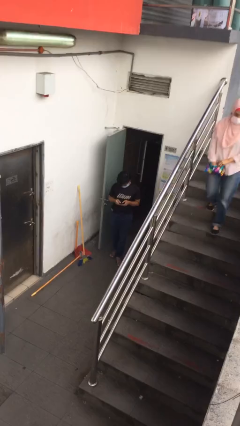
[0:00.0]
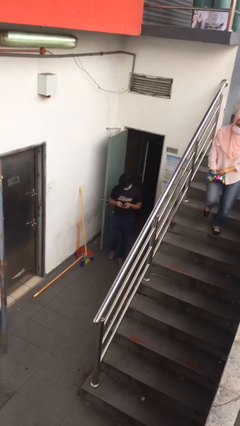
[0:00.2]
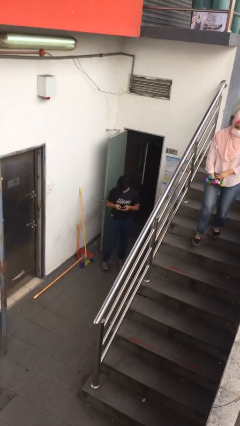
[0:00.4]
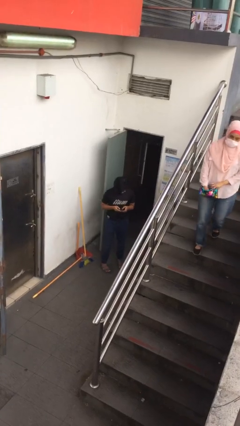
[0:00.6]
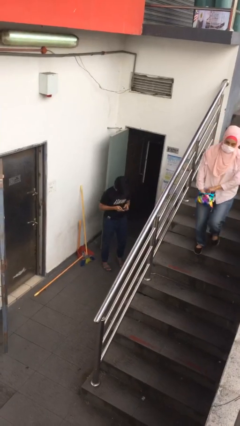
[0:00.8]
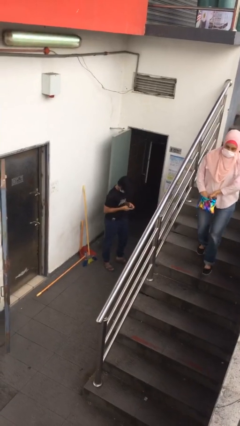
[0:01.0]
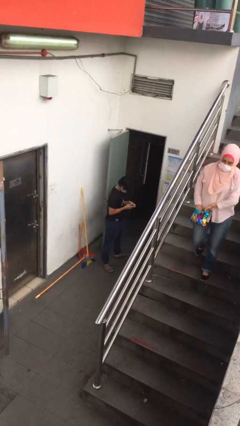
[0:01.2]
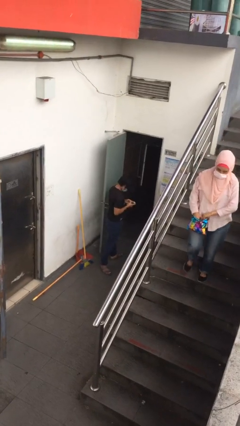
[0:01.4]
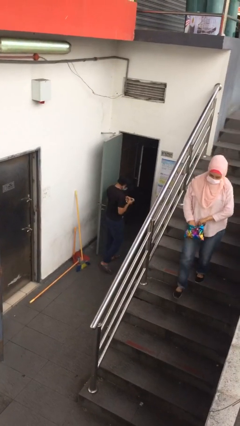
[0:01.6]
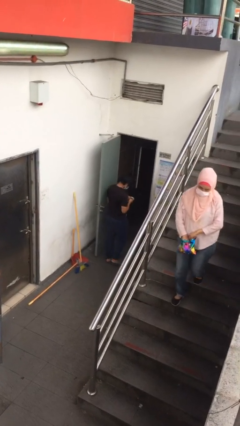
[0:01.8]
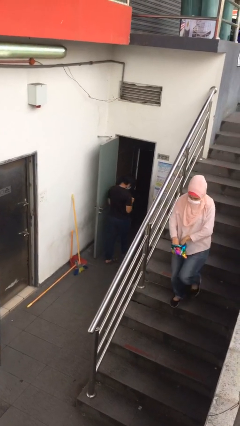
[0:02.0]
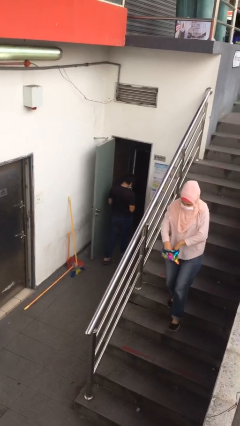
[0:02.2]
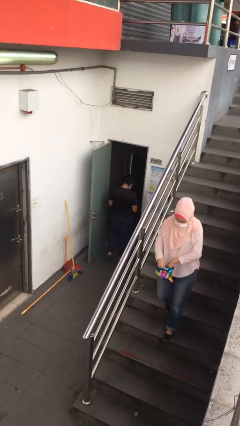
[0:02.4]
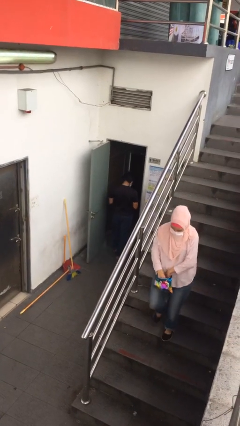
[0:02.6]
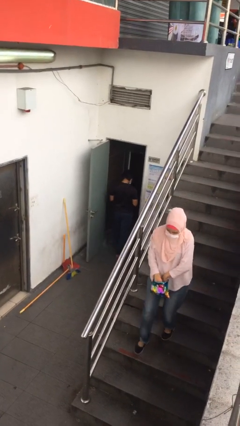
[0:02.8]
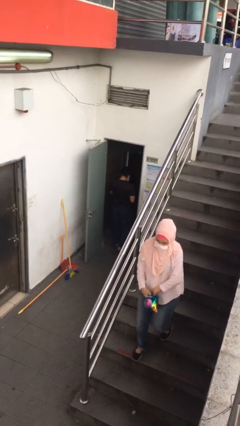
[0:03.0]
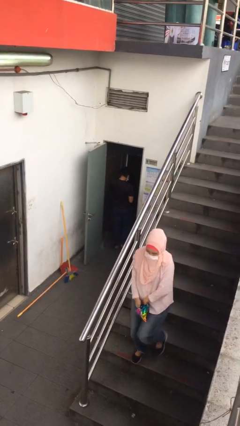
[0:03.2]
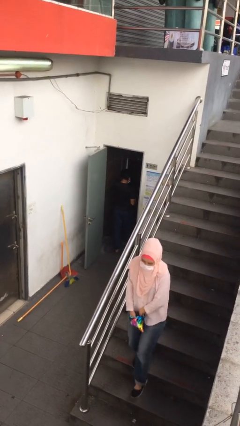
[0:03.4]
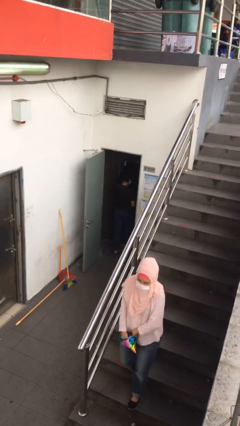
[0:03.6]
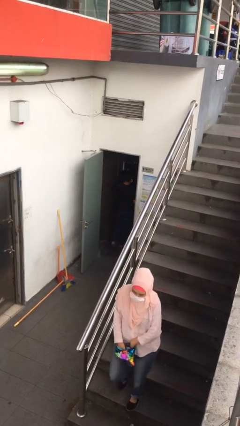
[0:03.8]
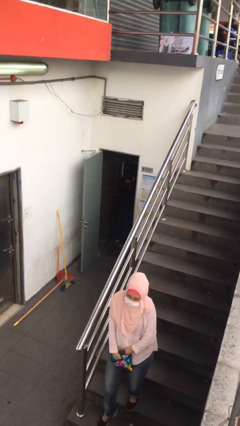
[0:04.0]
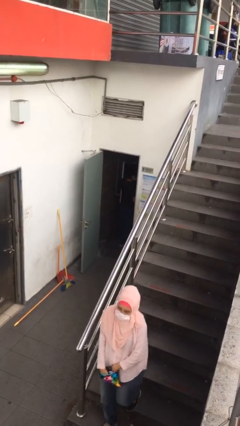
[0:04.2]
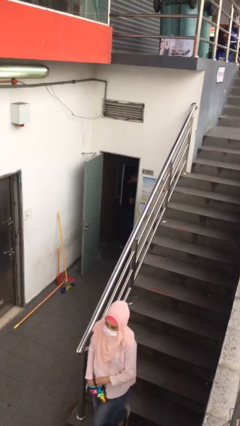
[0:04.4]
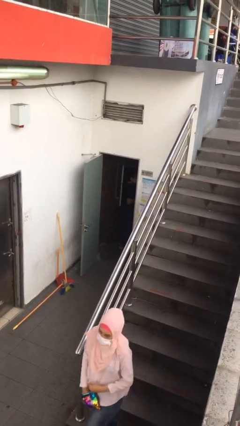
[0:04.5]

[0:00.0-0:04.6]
person exits scene through structure

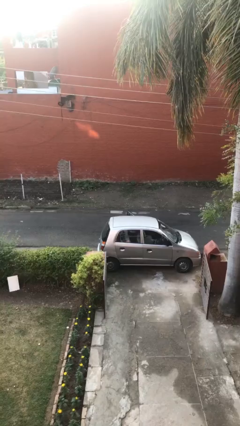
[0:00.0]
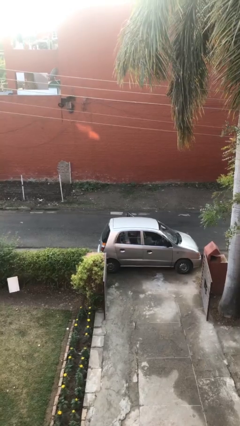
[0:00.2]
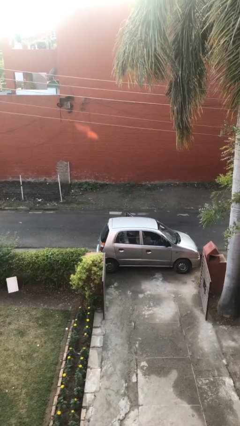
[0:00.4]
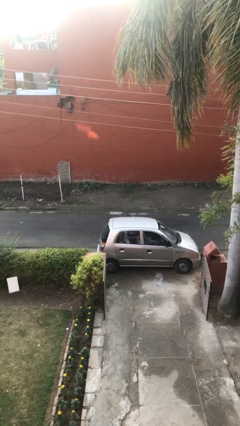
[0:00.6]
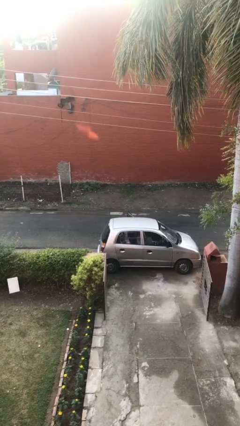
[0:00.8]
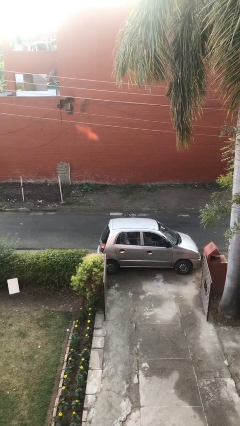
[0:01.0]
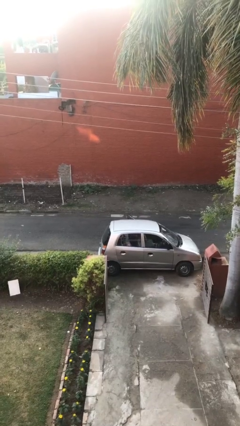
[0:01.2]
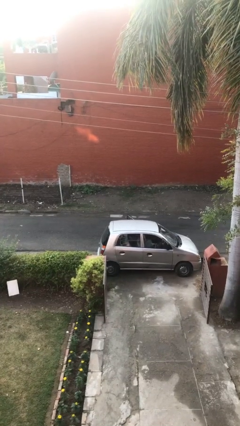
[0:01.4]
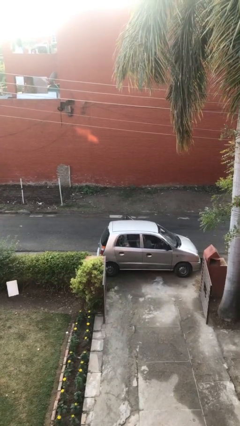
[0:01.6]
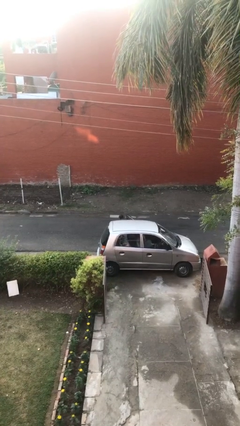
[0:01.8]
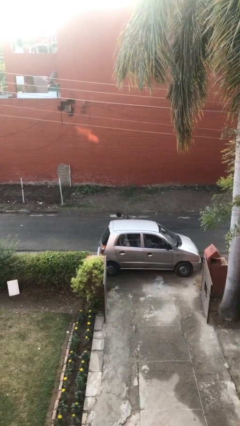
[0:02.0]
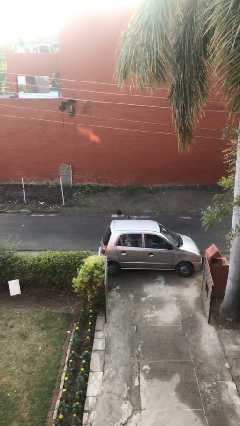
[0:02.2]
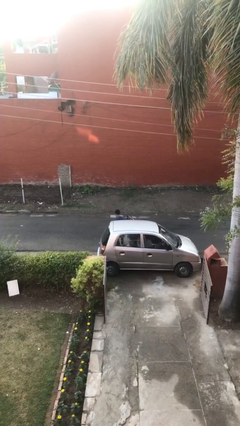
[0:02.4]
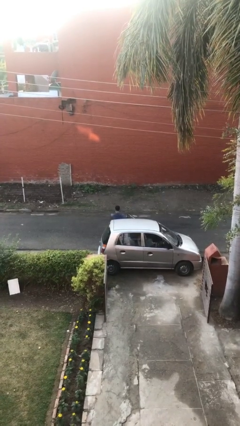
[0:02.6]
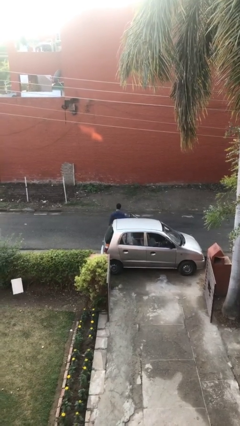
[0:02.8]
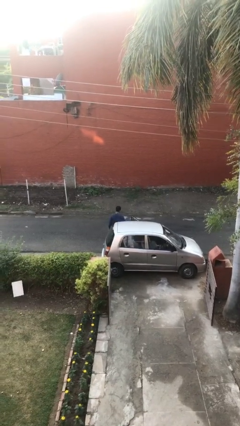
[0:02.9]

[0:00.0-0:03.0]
person exits car

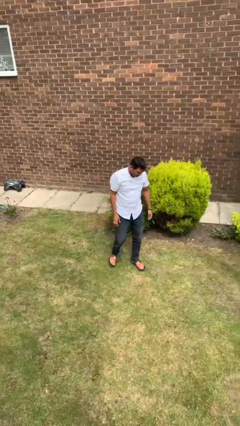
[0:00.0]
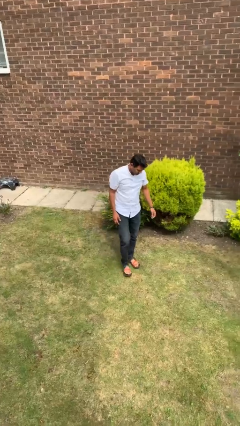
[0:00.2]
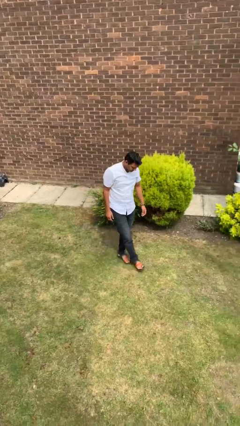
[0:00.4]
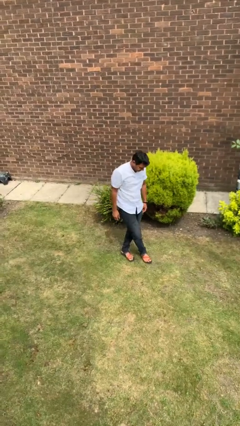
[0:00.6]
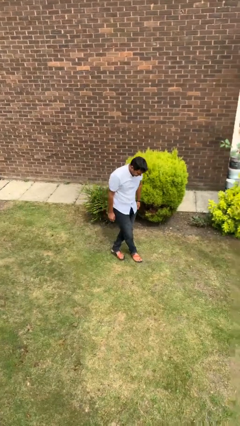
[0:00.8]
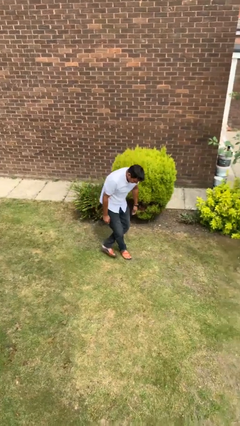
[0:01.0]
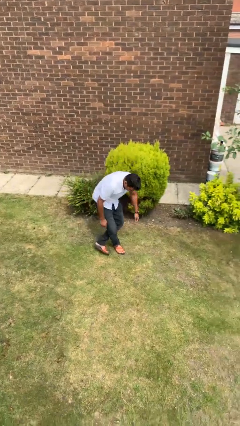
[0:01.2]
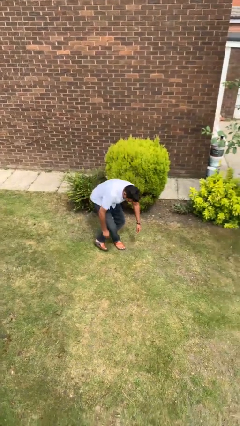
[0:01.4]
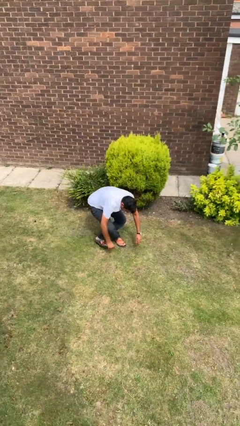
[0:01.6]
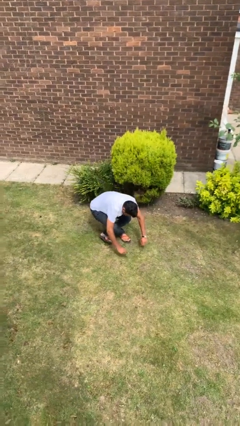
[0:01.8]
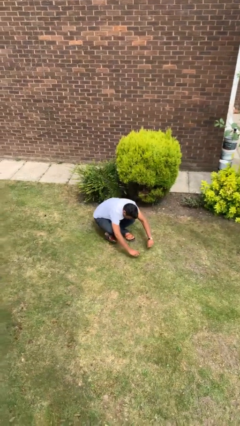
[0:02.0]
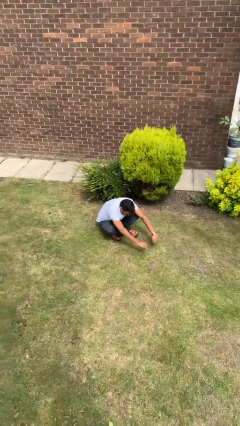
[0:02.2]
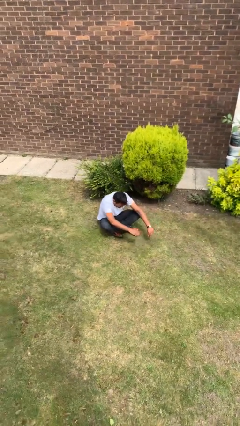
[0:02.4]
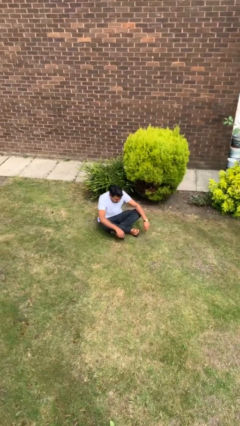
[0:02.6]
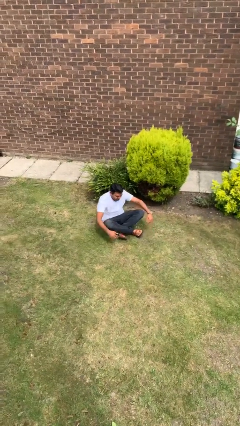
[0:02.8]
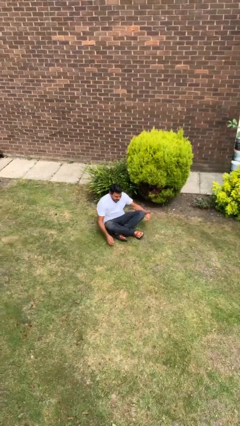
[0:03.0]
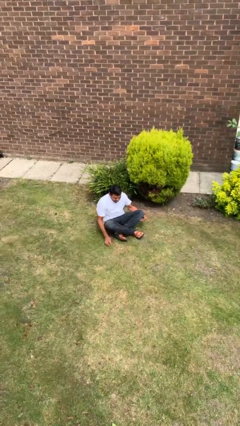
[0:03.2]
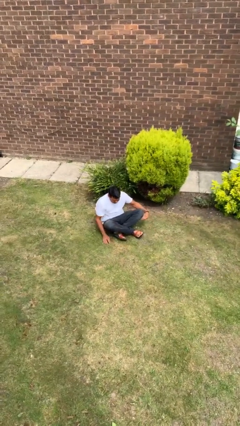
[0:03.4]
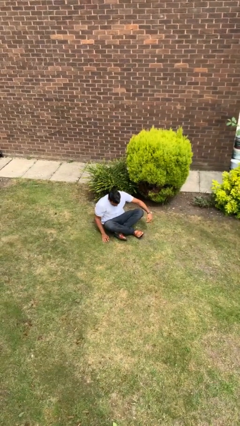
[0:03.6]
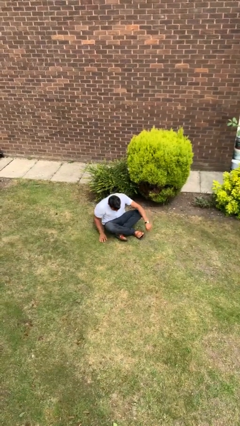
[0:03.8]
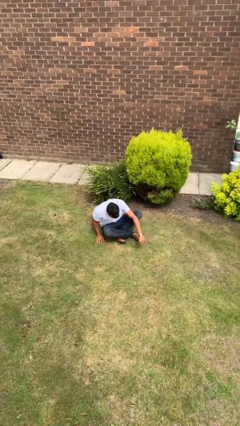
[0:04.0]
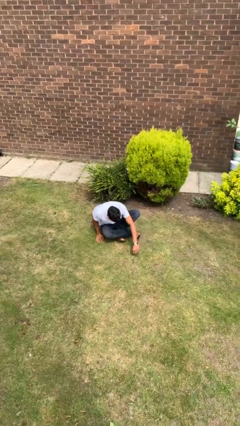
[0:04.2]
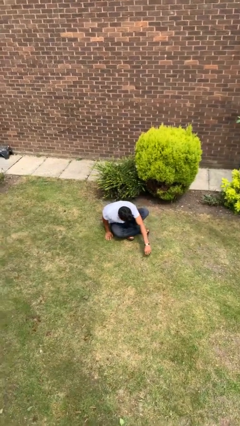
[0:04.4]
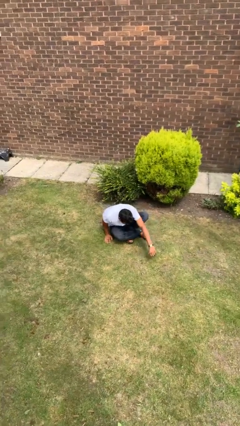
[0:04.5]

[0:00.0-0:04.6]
person sits crisscross

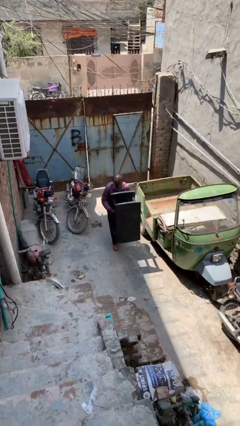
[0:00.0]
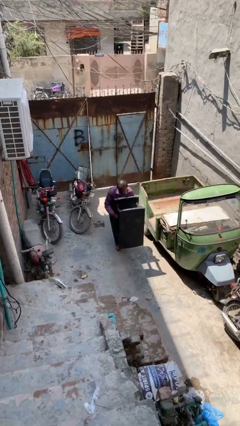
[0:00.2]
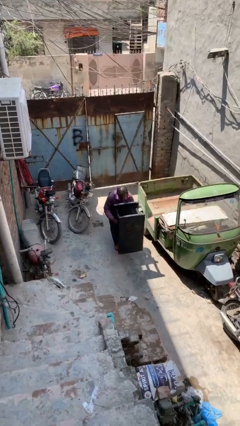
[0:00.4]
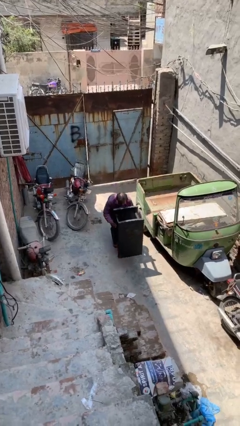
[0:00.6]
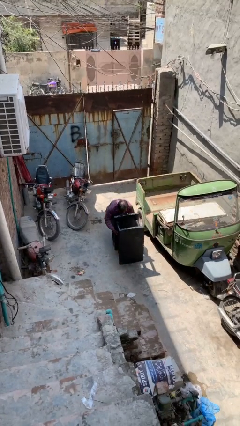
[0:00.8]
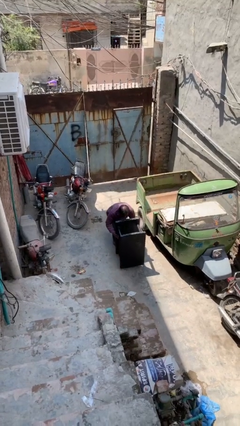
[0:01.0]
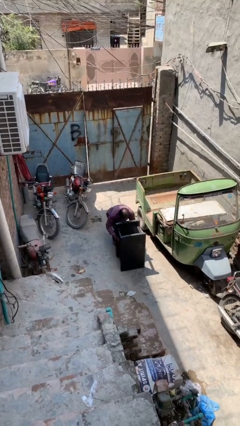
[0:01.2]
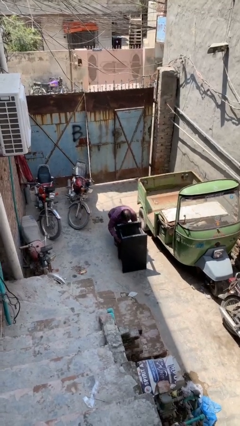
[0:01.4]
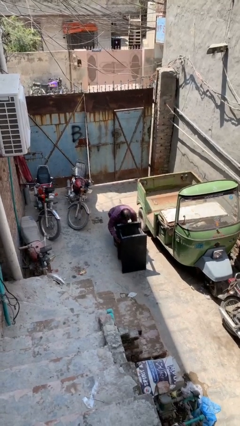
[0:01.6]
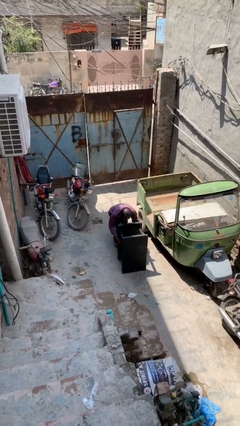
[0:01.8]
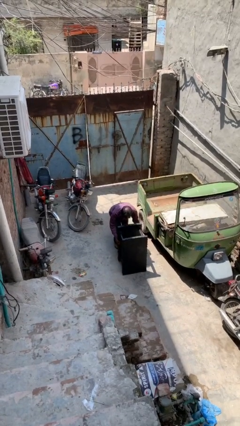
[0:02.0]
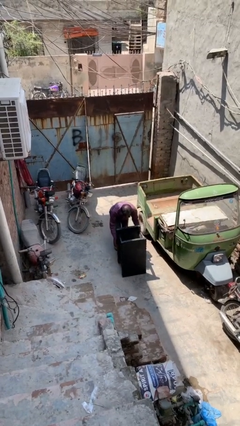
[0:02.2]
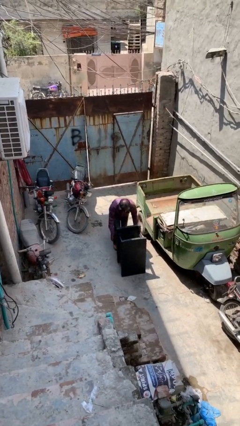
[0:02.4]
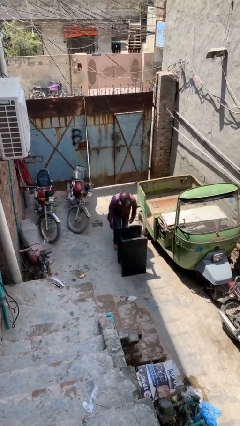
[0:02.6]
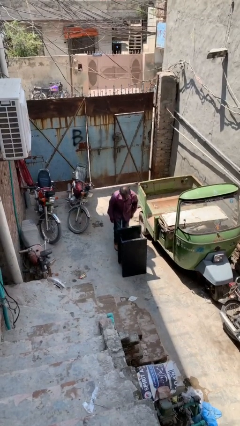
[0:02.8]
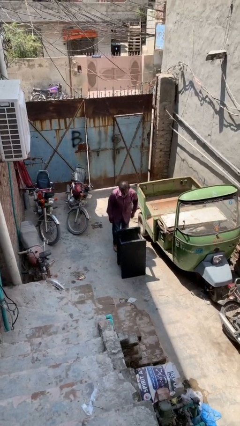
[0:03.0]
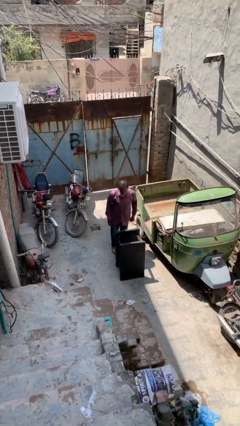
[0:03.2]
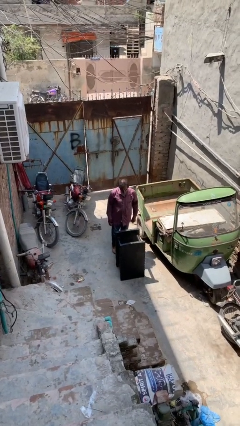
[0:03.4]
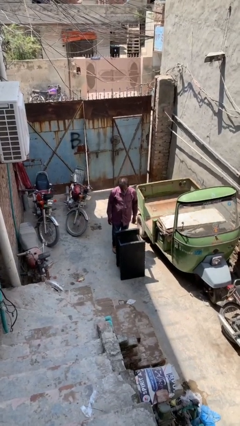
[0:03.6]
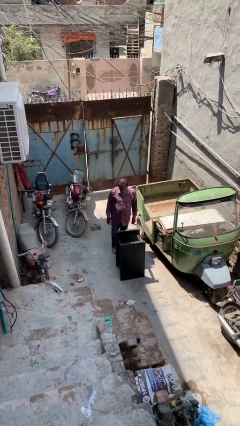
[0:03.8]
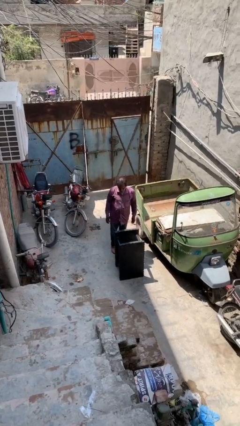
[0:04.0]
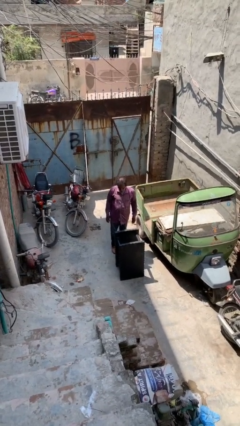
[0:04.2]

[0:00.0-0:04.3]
person puts down object on floor

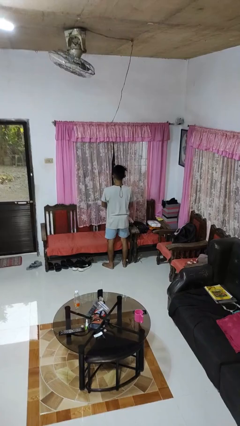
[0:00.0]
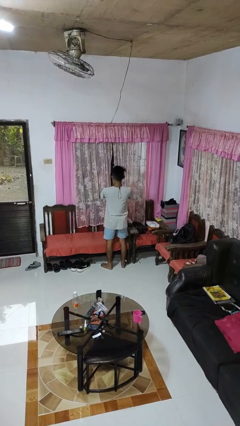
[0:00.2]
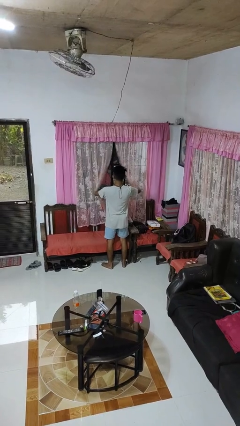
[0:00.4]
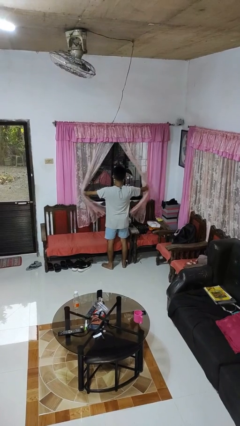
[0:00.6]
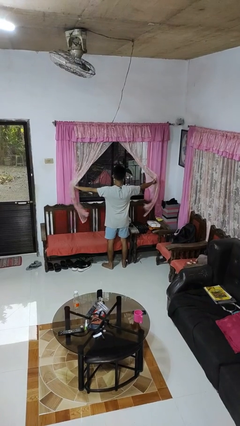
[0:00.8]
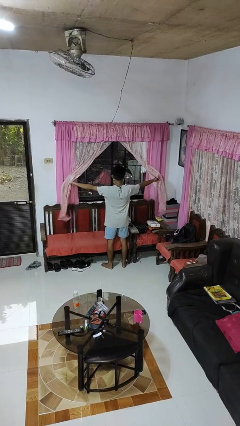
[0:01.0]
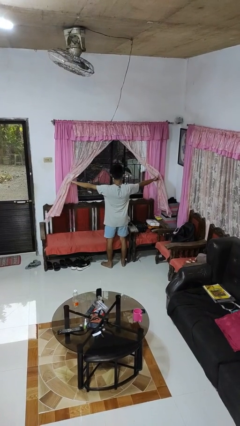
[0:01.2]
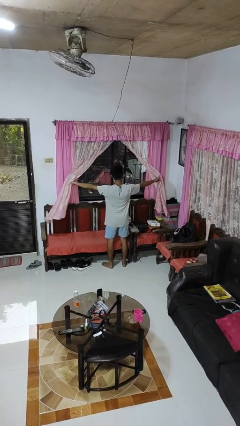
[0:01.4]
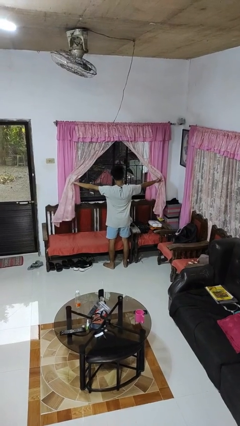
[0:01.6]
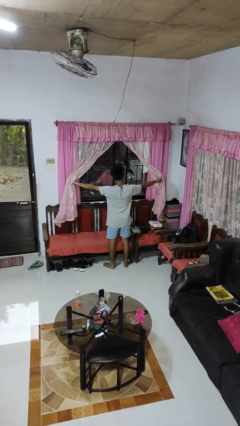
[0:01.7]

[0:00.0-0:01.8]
person opens curtains
